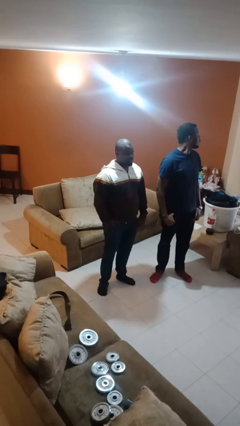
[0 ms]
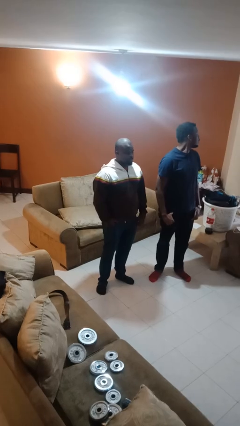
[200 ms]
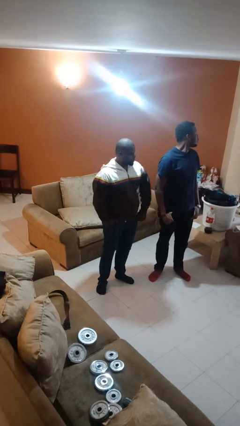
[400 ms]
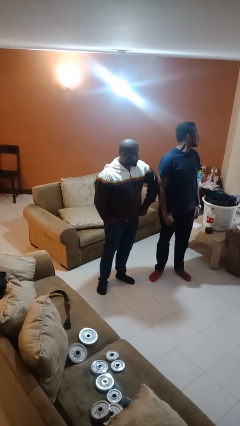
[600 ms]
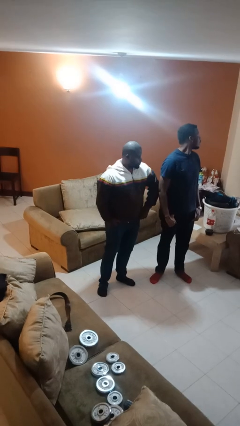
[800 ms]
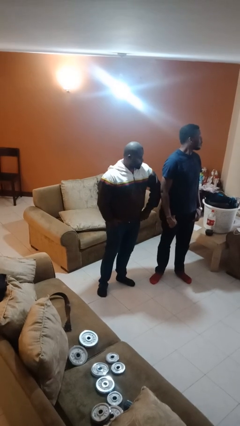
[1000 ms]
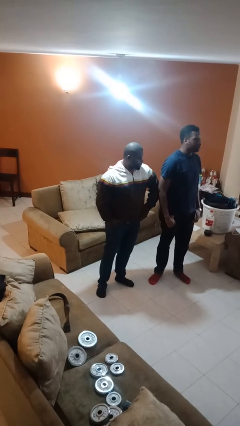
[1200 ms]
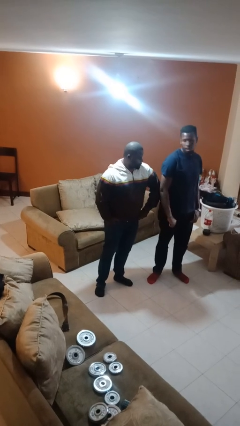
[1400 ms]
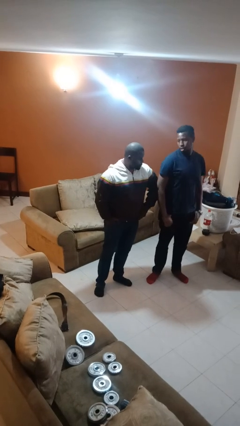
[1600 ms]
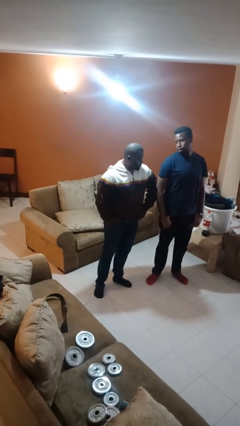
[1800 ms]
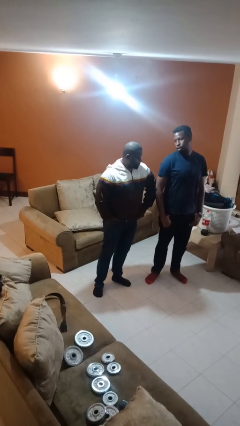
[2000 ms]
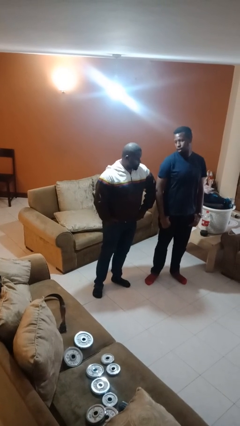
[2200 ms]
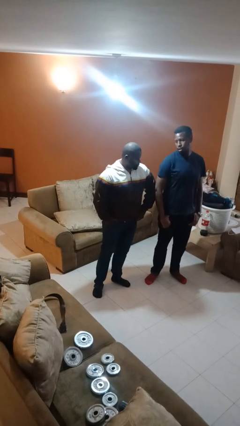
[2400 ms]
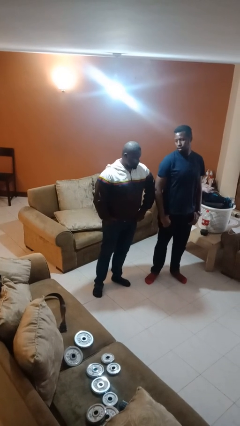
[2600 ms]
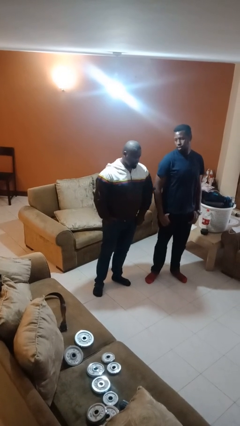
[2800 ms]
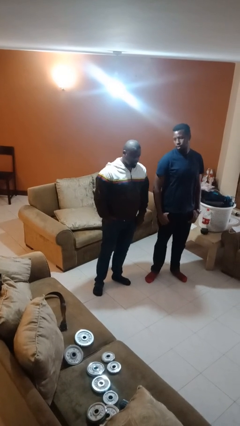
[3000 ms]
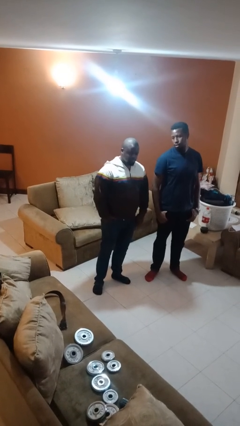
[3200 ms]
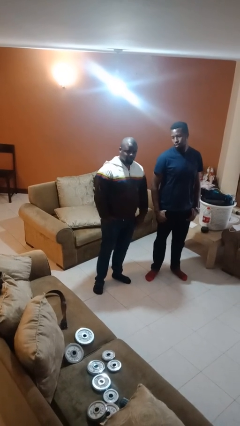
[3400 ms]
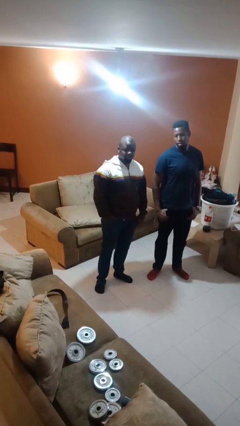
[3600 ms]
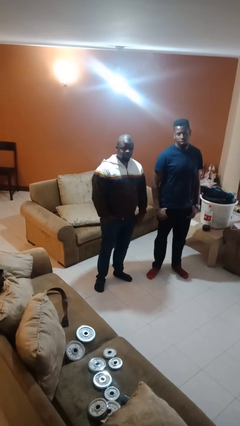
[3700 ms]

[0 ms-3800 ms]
person nudges person with elbow

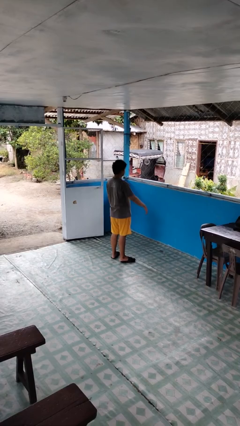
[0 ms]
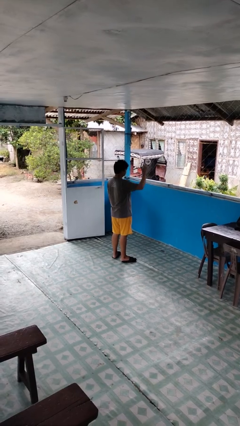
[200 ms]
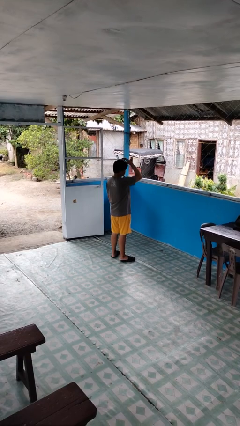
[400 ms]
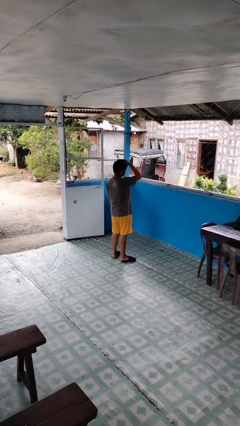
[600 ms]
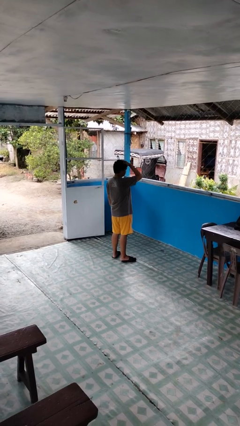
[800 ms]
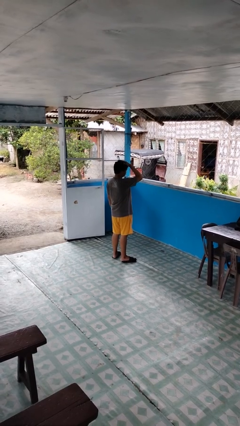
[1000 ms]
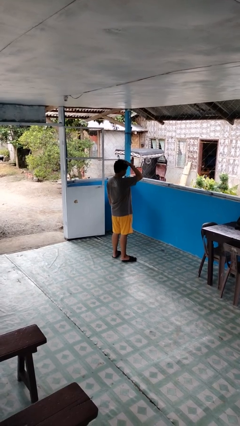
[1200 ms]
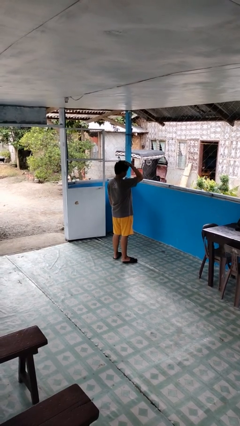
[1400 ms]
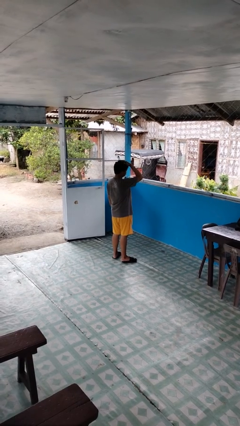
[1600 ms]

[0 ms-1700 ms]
person pats head

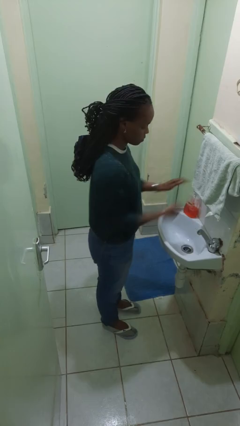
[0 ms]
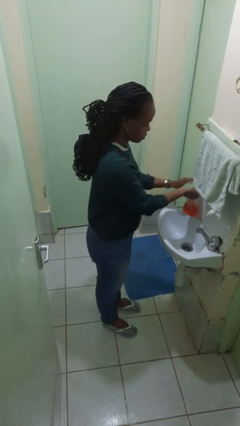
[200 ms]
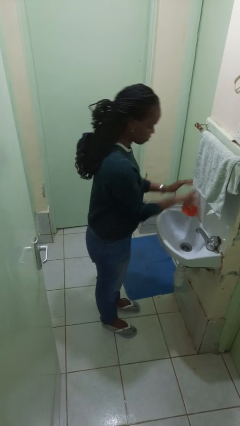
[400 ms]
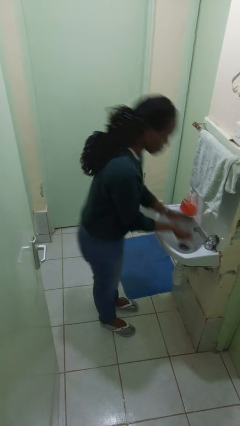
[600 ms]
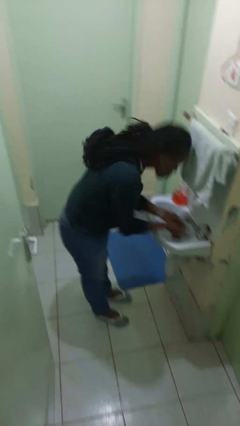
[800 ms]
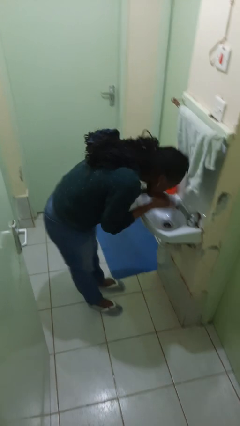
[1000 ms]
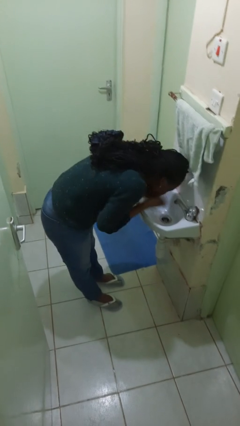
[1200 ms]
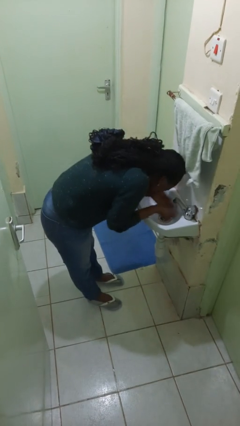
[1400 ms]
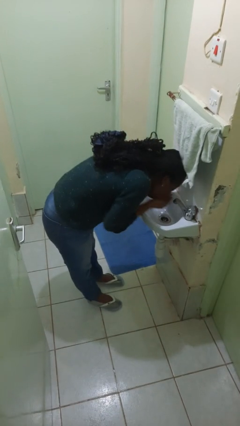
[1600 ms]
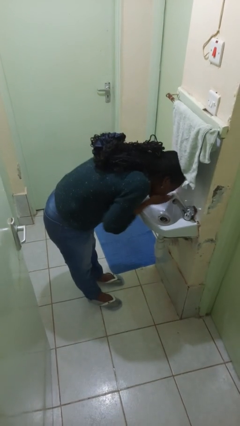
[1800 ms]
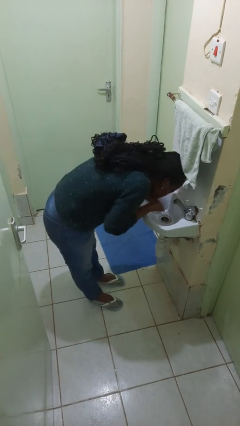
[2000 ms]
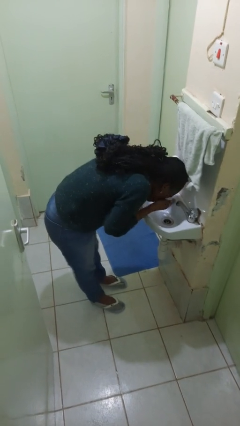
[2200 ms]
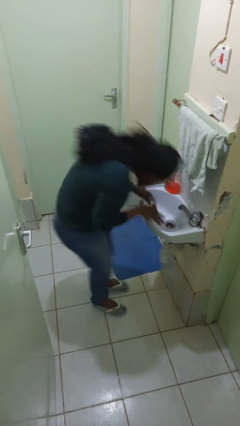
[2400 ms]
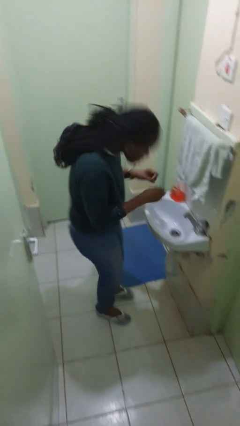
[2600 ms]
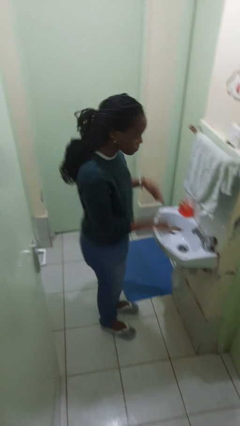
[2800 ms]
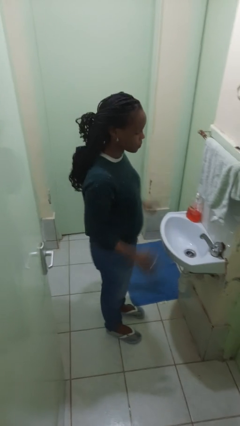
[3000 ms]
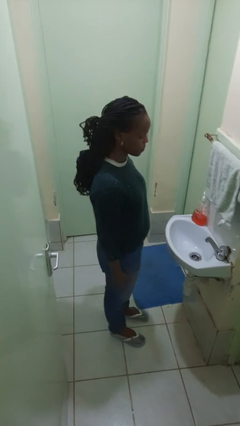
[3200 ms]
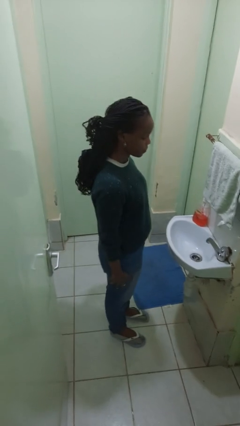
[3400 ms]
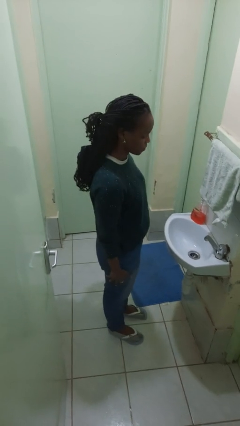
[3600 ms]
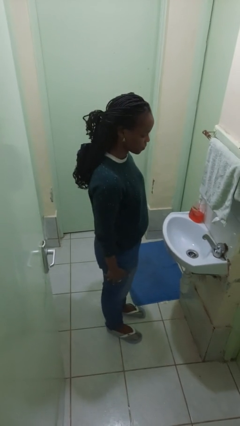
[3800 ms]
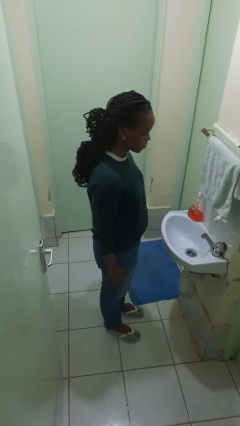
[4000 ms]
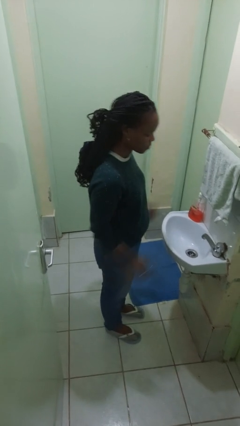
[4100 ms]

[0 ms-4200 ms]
person washes face

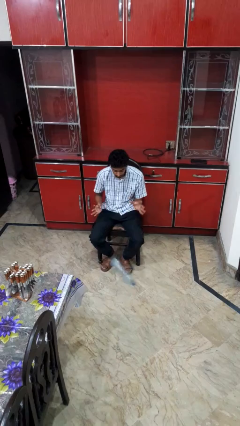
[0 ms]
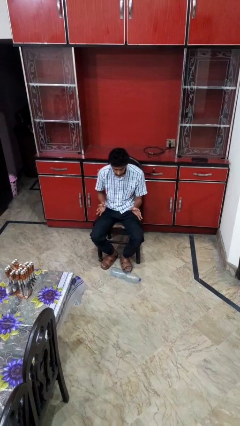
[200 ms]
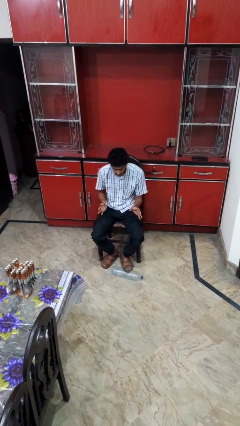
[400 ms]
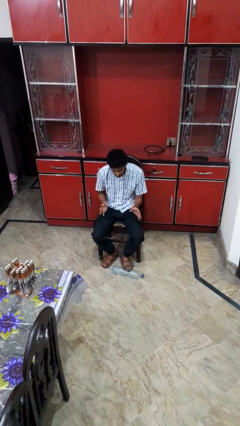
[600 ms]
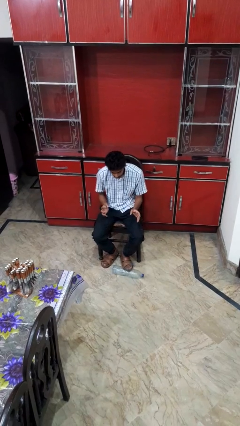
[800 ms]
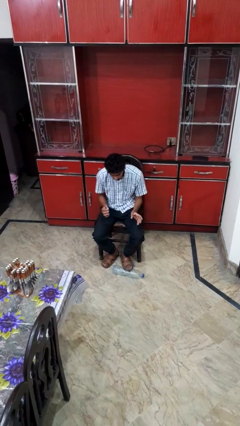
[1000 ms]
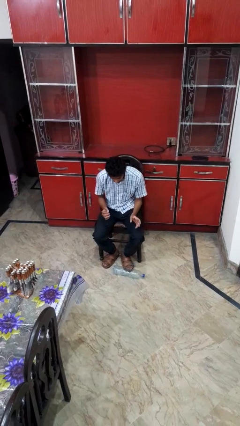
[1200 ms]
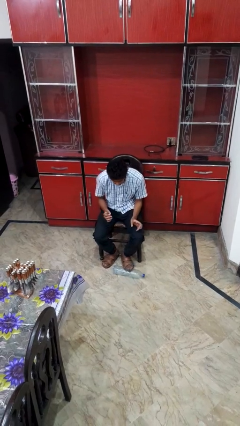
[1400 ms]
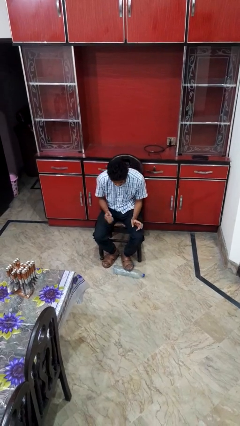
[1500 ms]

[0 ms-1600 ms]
person drops object

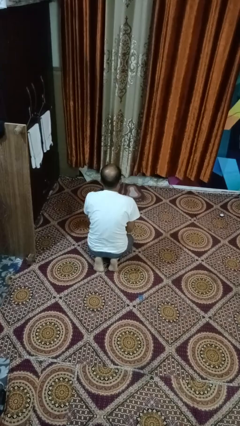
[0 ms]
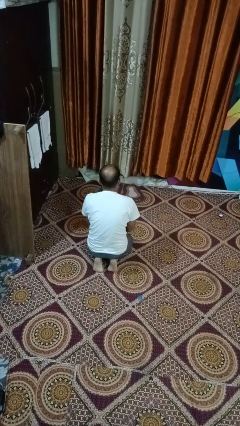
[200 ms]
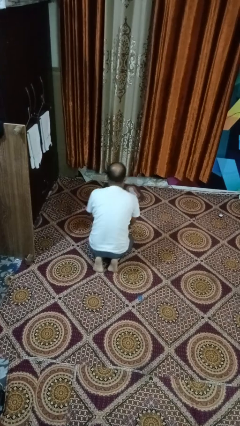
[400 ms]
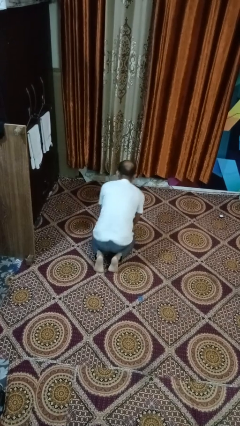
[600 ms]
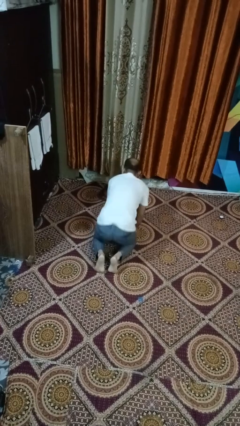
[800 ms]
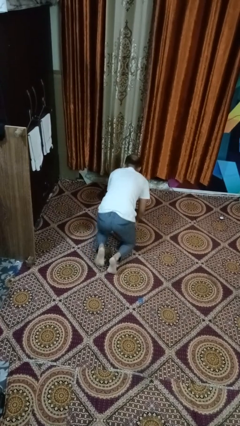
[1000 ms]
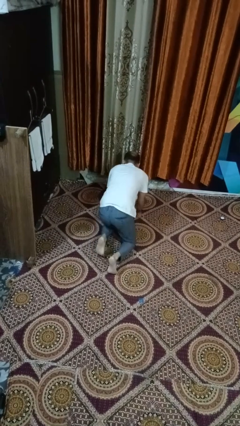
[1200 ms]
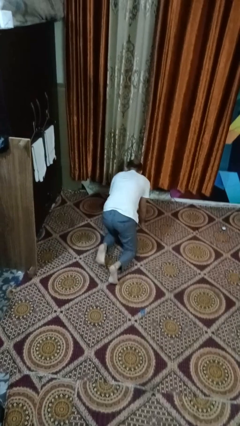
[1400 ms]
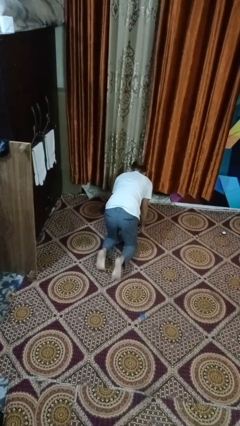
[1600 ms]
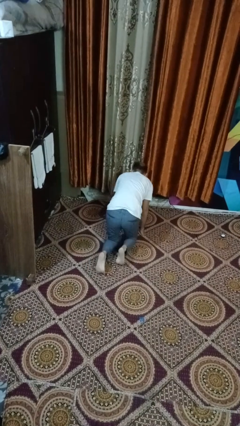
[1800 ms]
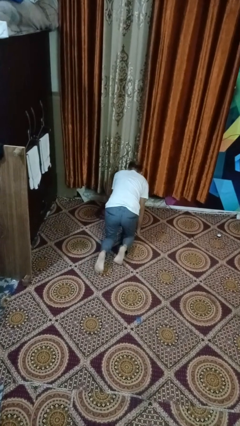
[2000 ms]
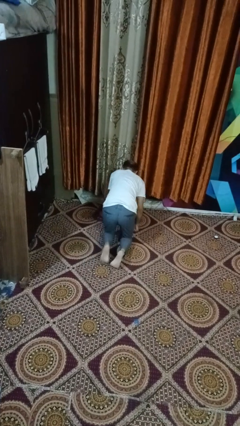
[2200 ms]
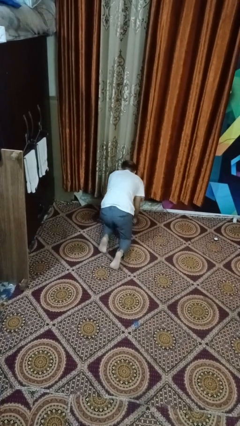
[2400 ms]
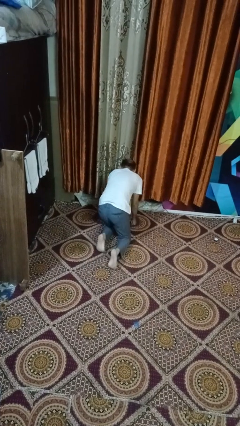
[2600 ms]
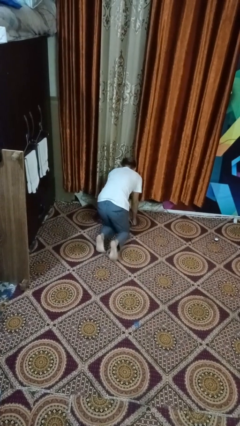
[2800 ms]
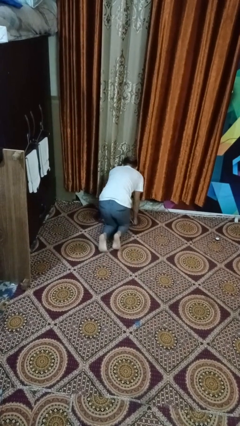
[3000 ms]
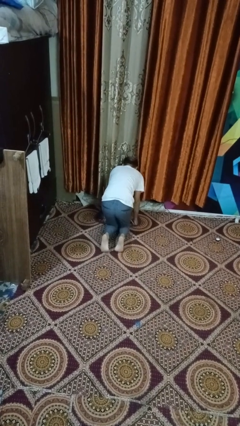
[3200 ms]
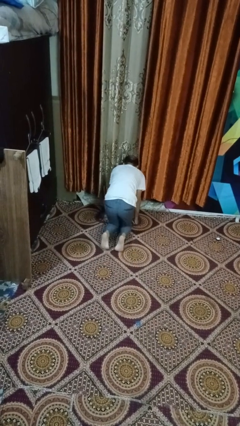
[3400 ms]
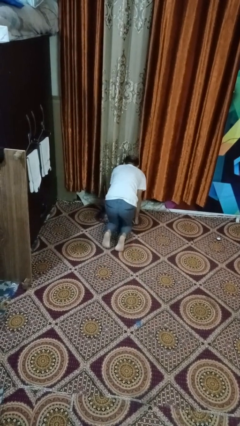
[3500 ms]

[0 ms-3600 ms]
person crawls

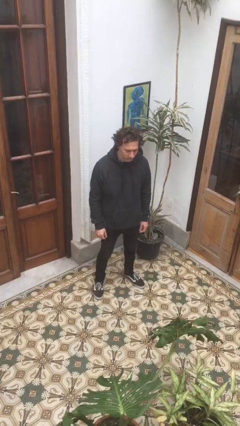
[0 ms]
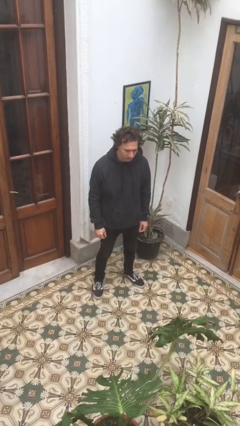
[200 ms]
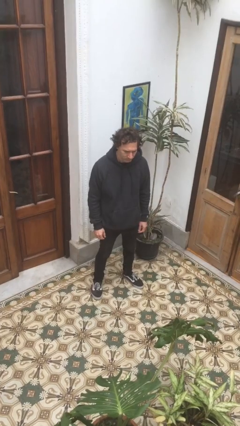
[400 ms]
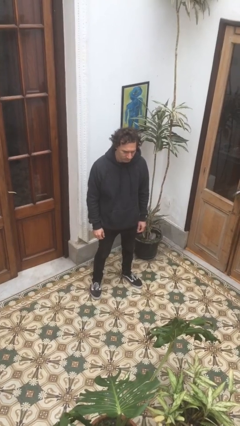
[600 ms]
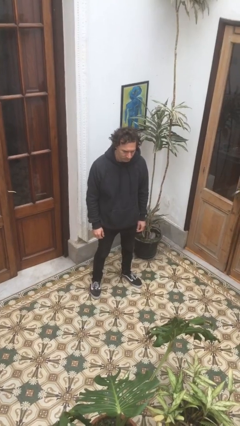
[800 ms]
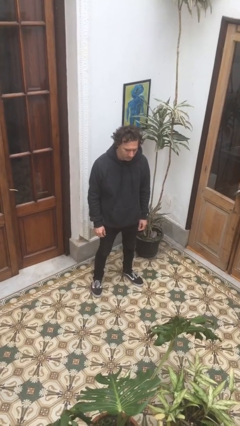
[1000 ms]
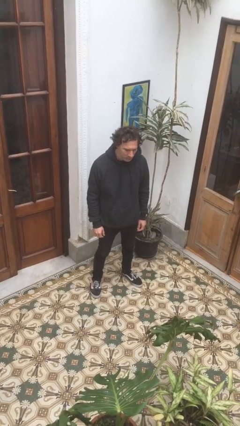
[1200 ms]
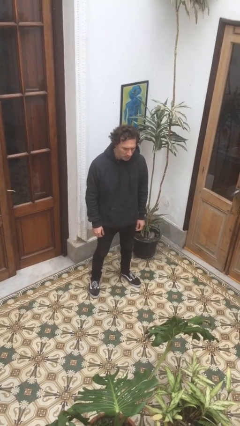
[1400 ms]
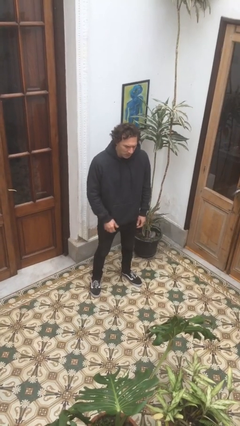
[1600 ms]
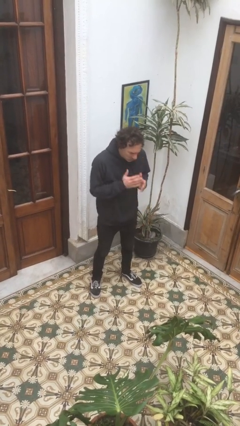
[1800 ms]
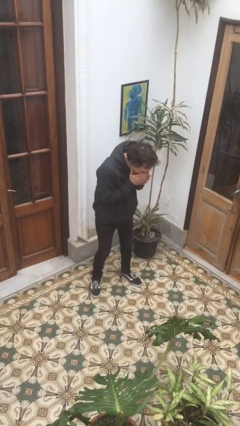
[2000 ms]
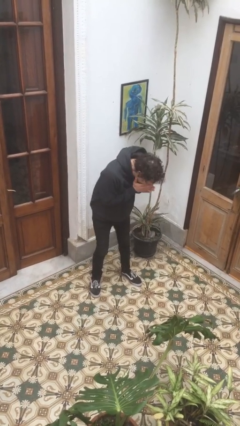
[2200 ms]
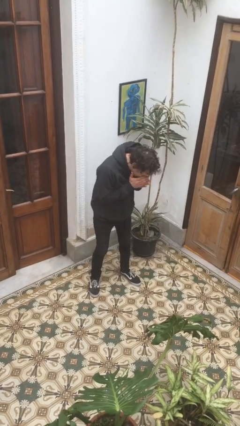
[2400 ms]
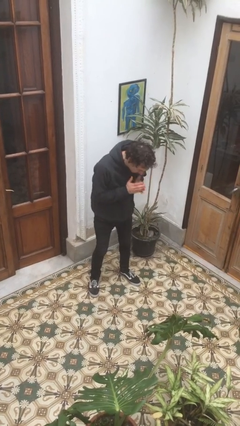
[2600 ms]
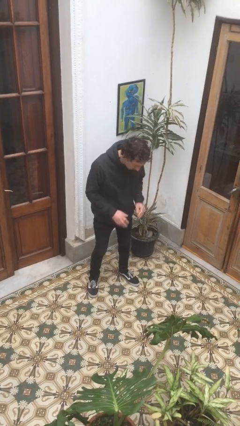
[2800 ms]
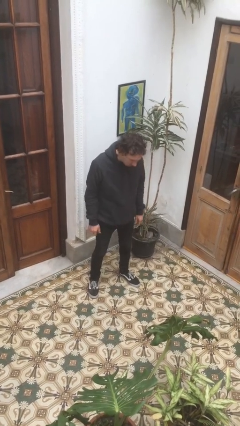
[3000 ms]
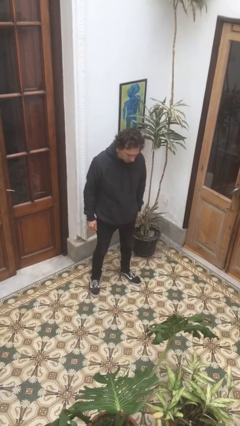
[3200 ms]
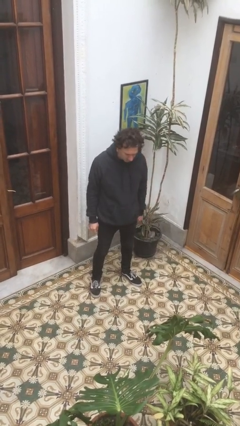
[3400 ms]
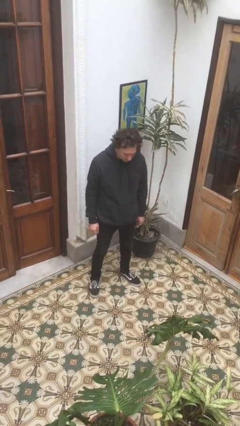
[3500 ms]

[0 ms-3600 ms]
person sneezes into hand
